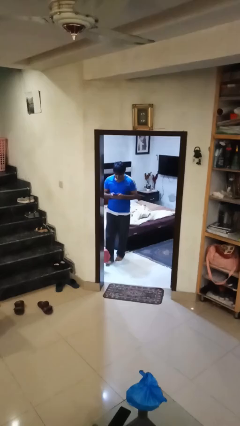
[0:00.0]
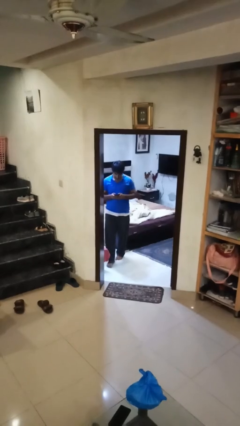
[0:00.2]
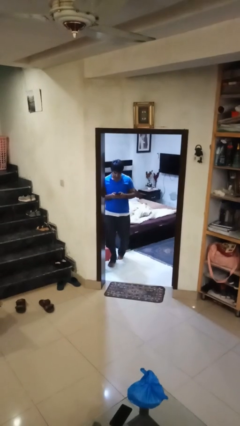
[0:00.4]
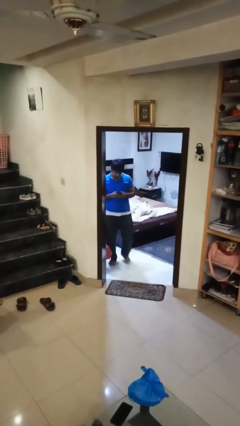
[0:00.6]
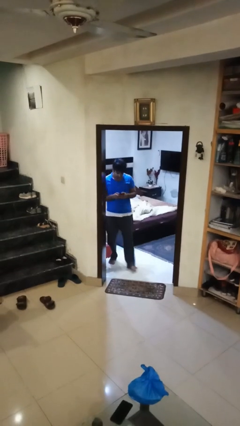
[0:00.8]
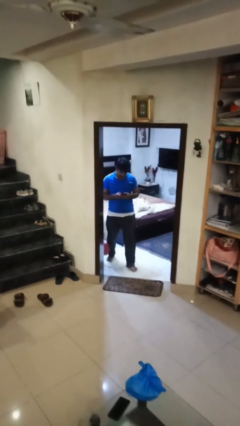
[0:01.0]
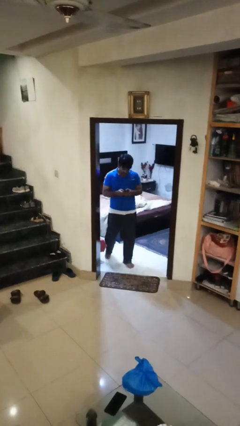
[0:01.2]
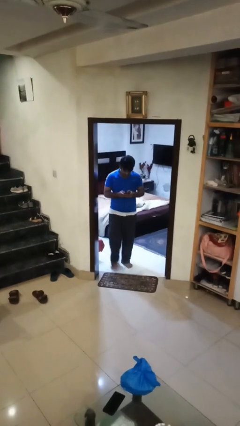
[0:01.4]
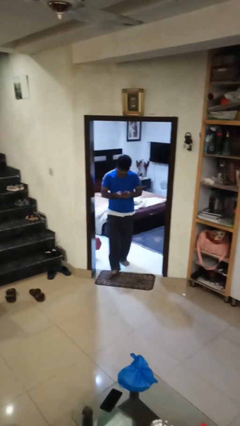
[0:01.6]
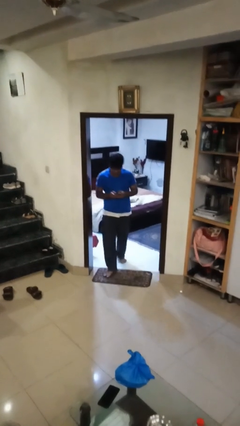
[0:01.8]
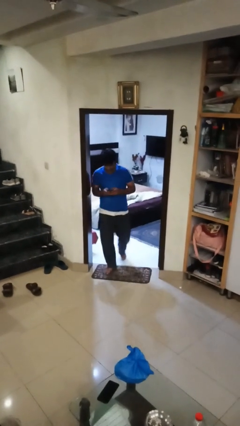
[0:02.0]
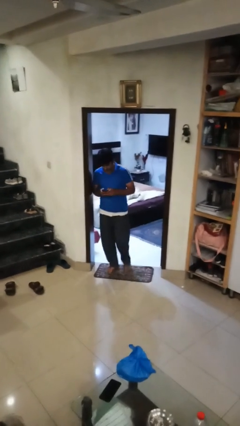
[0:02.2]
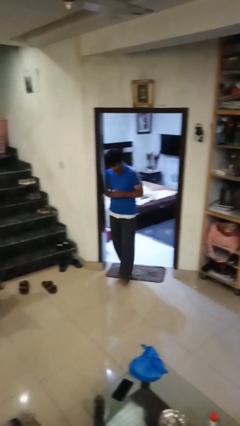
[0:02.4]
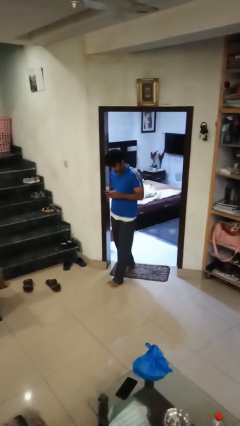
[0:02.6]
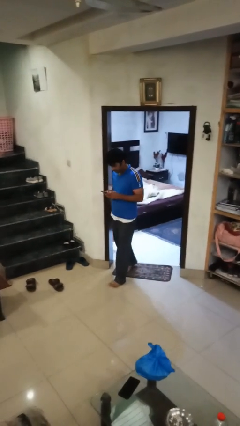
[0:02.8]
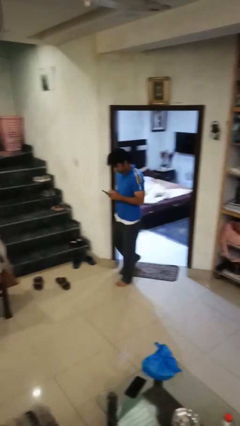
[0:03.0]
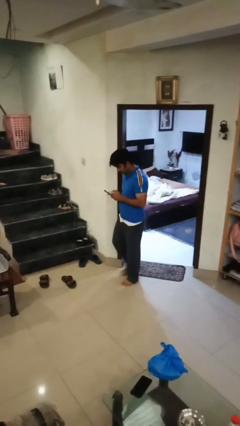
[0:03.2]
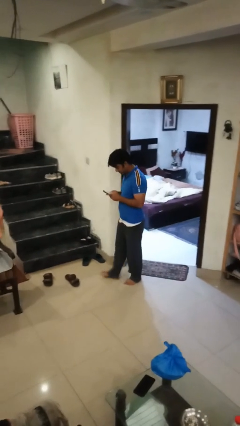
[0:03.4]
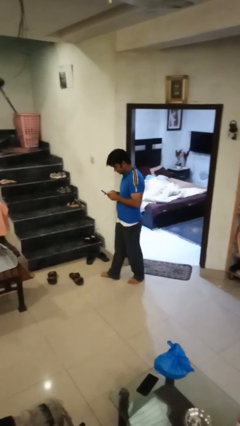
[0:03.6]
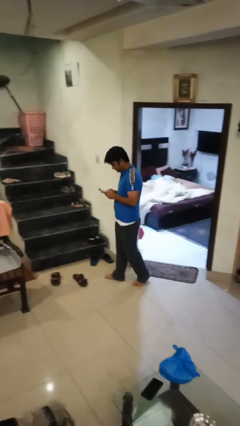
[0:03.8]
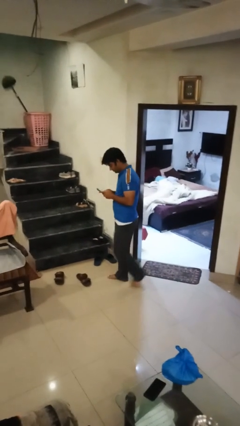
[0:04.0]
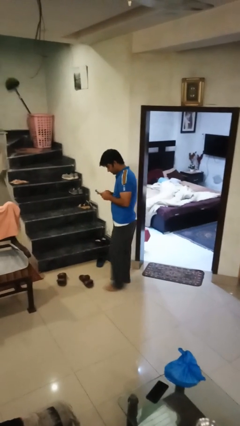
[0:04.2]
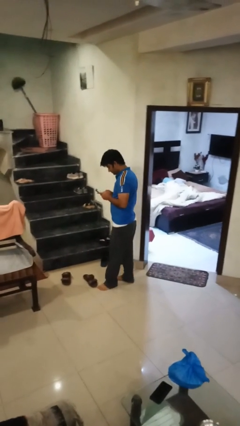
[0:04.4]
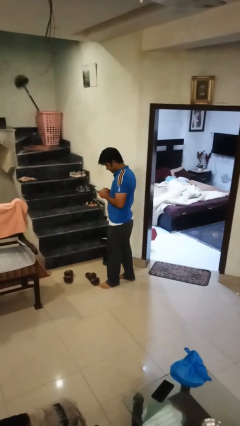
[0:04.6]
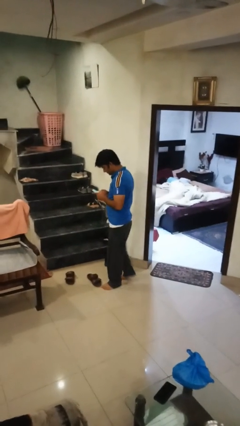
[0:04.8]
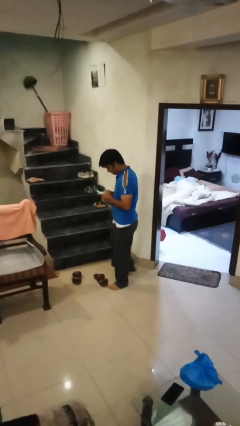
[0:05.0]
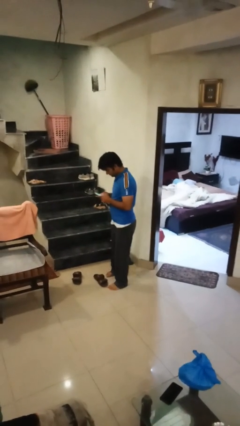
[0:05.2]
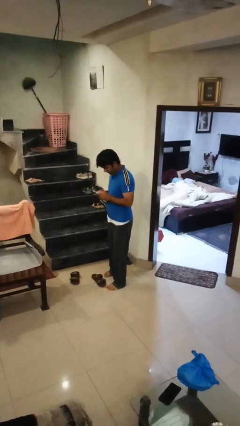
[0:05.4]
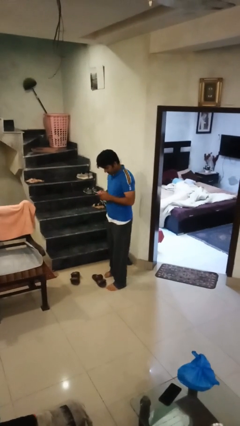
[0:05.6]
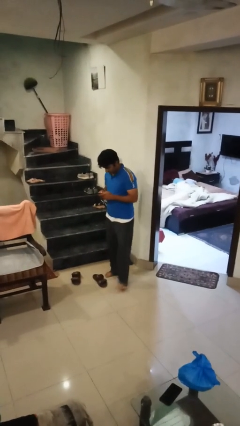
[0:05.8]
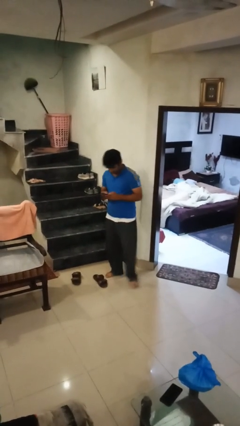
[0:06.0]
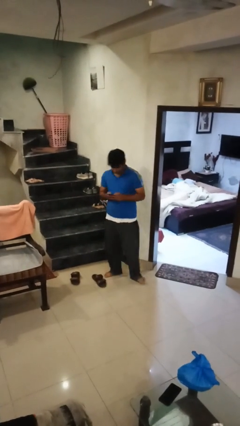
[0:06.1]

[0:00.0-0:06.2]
person enters scene through structure

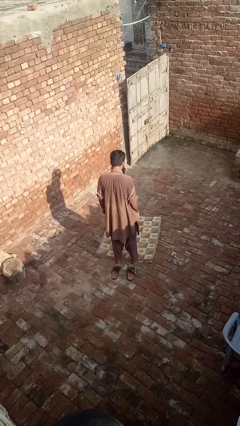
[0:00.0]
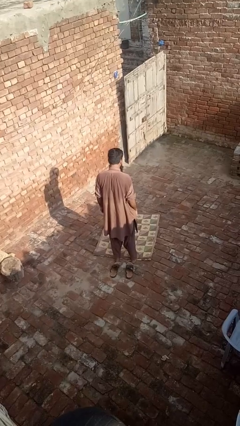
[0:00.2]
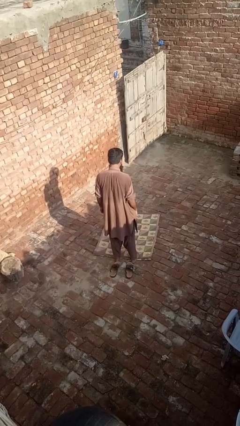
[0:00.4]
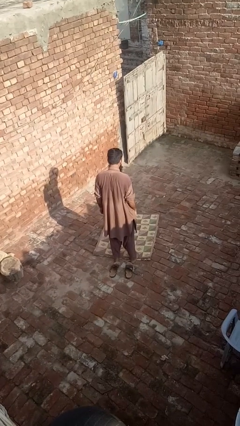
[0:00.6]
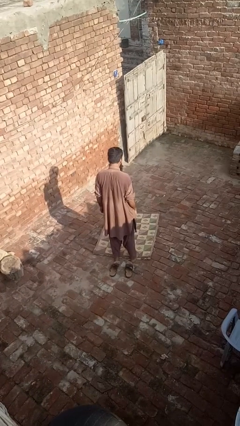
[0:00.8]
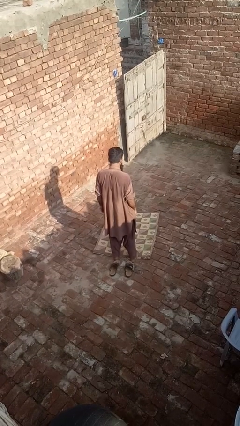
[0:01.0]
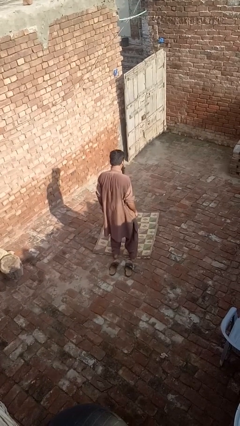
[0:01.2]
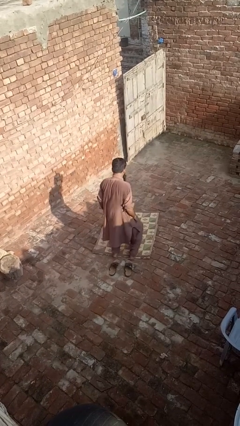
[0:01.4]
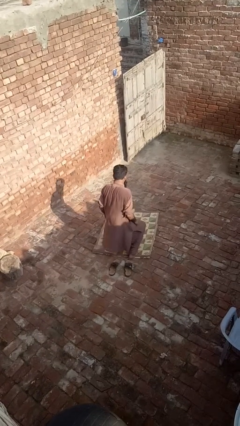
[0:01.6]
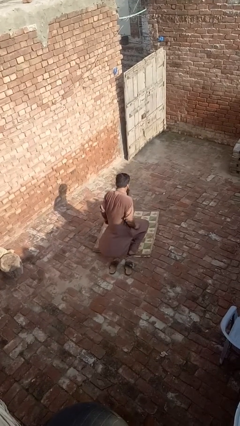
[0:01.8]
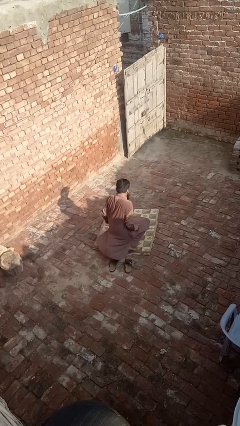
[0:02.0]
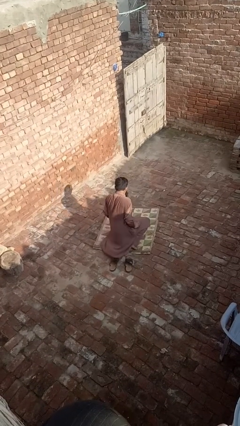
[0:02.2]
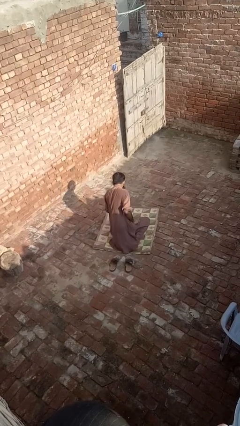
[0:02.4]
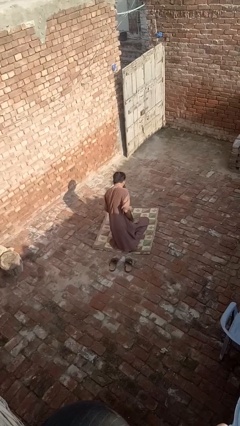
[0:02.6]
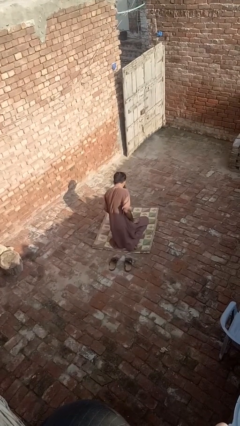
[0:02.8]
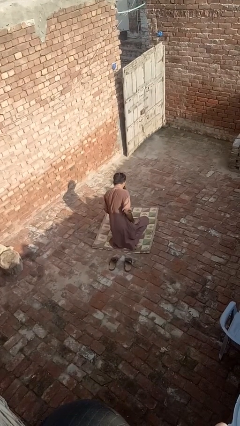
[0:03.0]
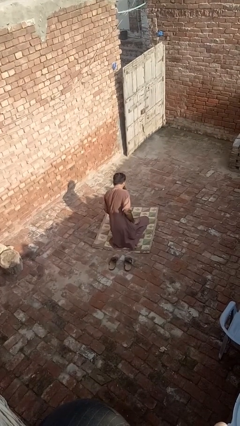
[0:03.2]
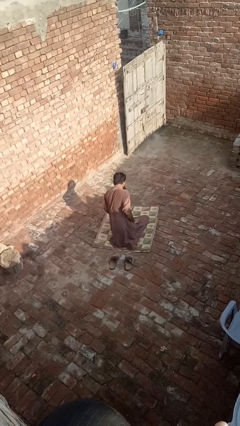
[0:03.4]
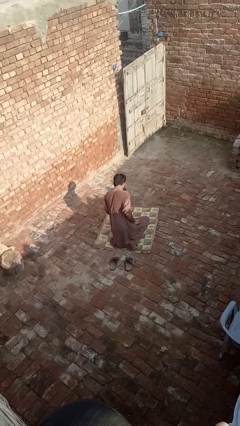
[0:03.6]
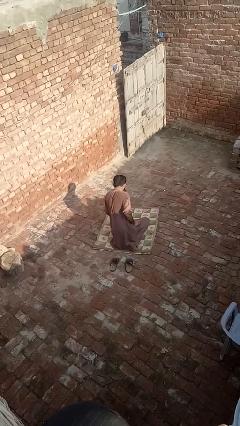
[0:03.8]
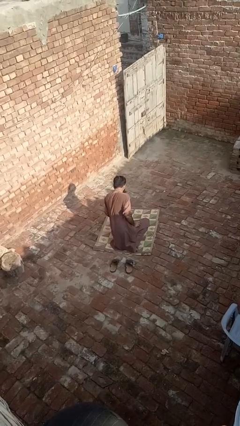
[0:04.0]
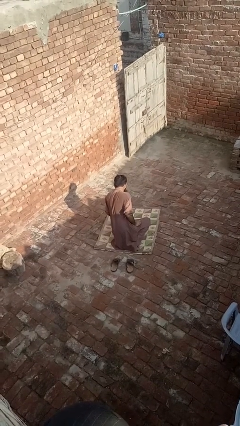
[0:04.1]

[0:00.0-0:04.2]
person kneels

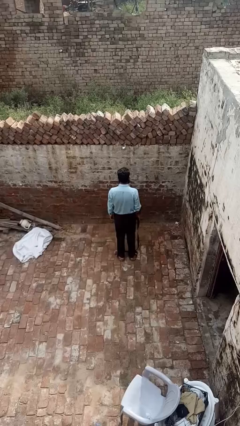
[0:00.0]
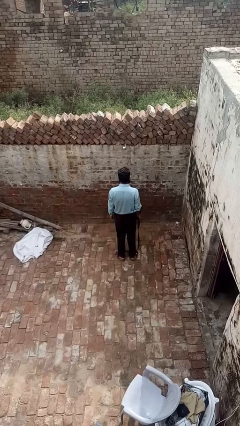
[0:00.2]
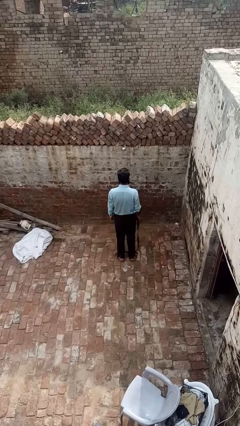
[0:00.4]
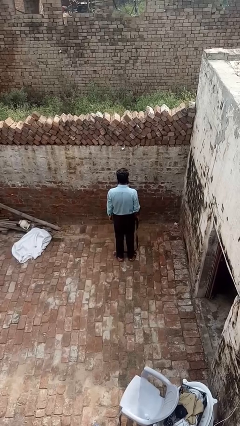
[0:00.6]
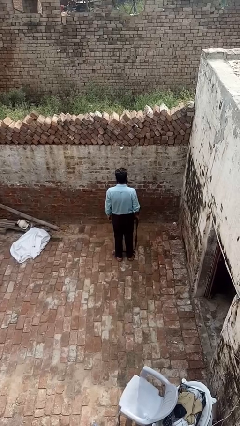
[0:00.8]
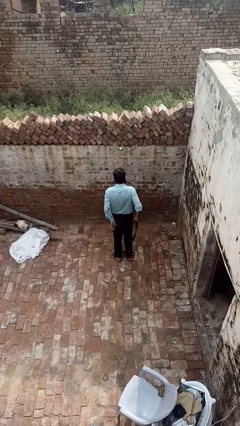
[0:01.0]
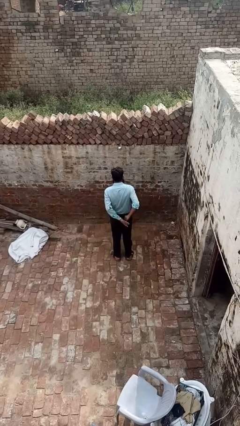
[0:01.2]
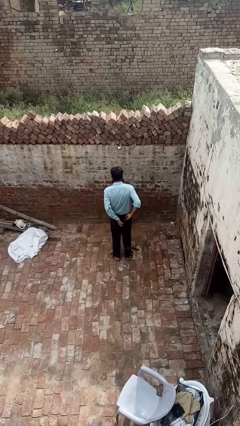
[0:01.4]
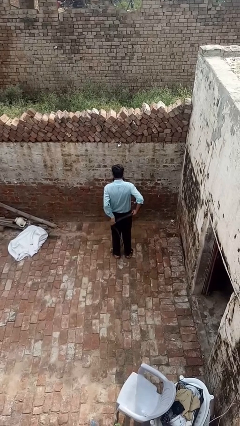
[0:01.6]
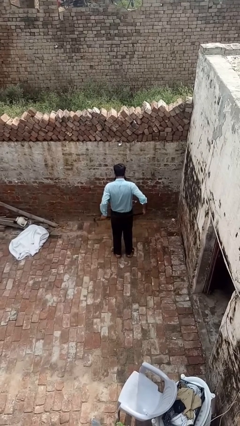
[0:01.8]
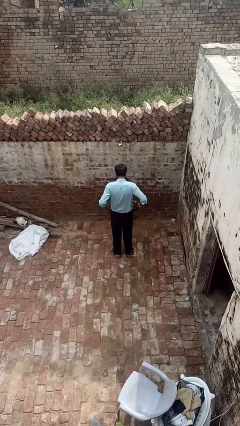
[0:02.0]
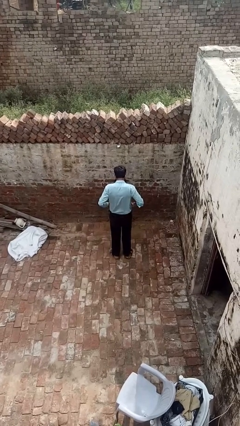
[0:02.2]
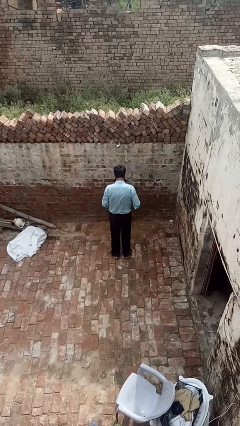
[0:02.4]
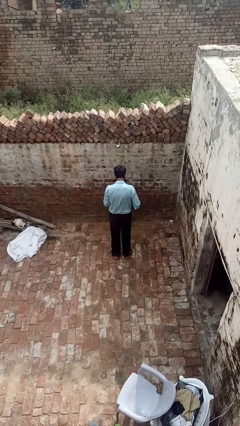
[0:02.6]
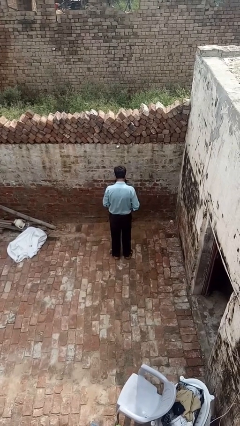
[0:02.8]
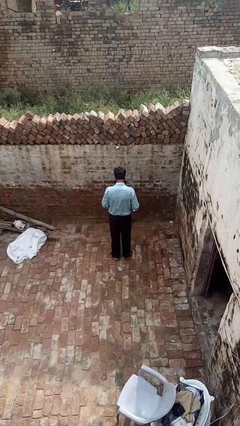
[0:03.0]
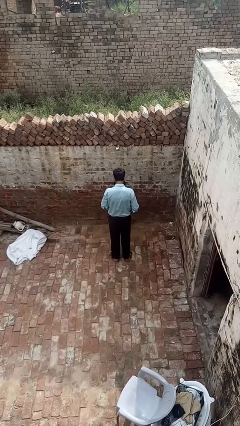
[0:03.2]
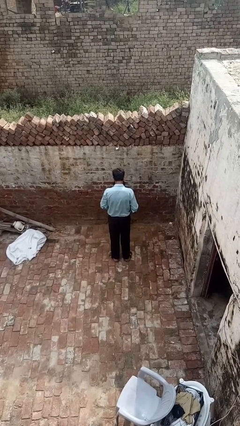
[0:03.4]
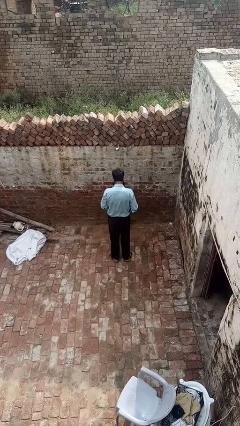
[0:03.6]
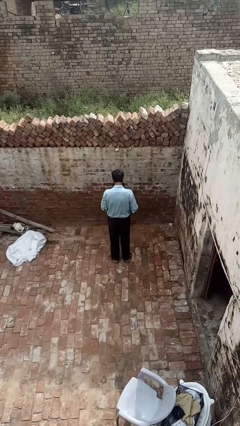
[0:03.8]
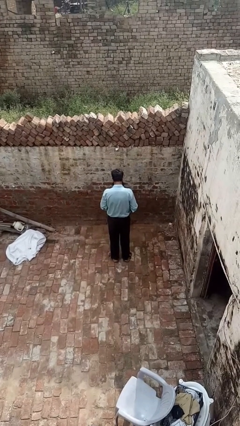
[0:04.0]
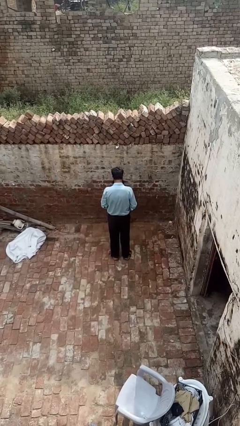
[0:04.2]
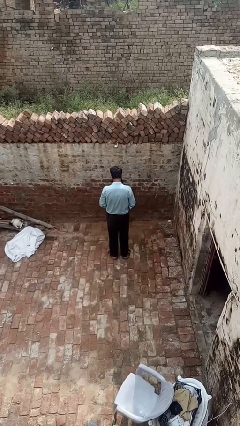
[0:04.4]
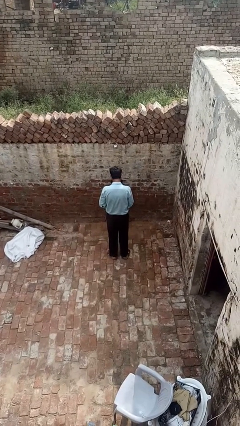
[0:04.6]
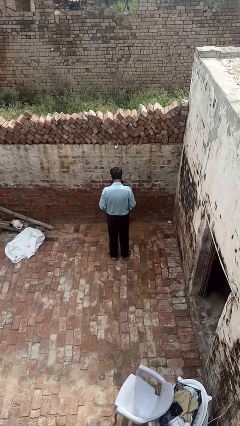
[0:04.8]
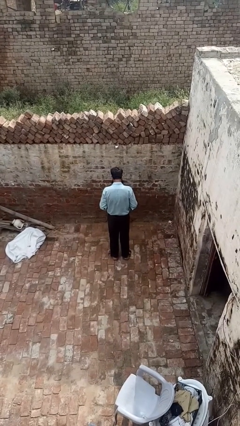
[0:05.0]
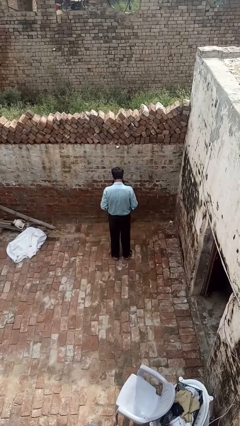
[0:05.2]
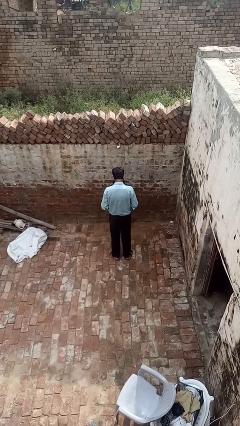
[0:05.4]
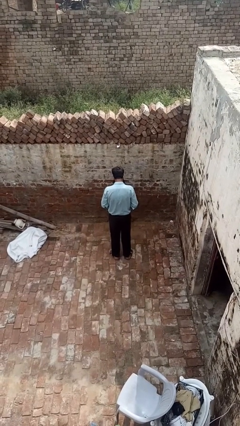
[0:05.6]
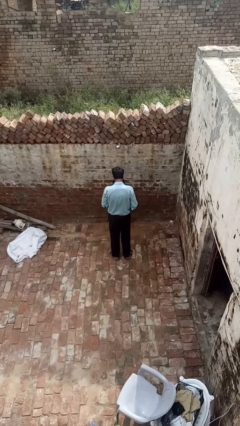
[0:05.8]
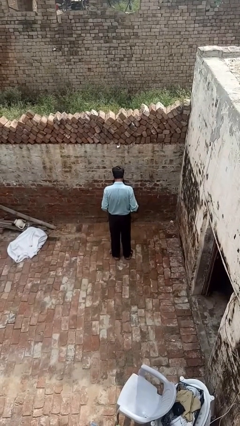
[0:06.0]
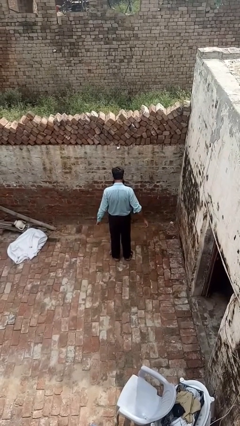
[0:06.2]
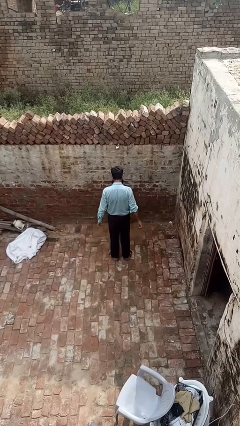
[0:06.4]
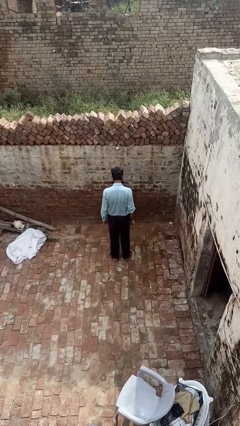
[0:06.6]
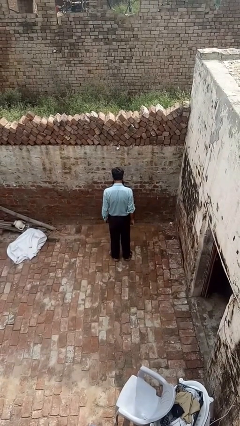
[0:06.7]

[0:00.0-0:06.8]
person puts on belt

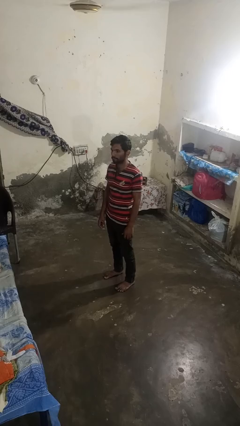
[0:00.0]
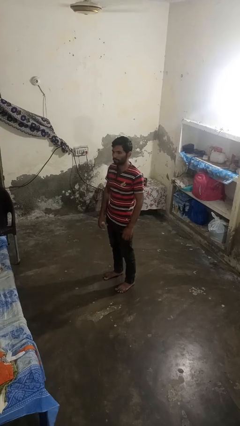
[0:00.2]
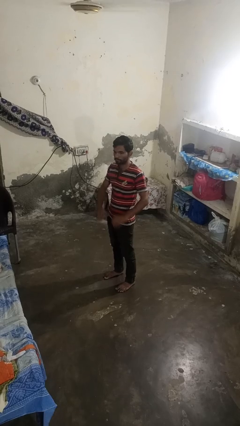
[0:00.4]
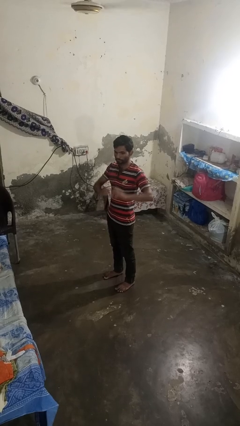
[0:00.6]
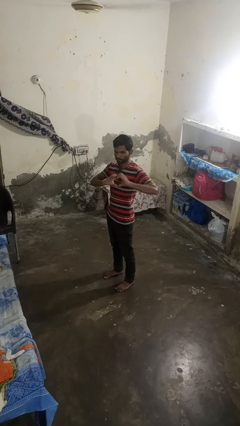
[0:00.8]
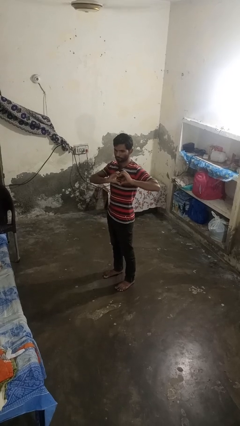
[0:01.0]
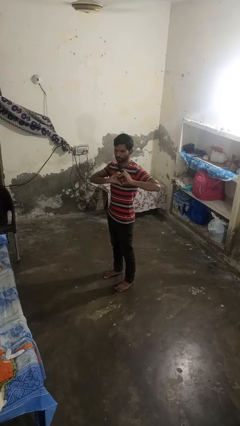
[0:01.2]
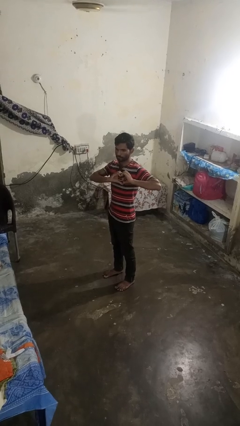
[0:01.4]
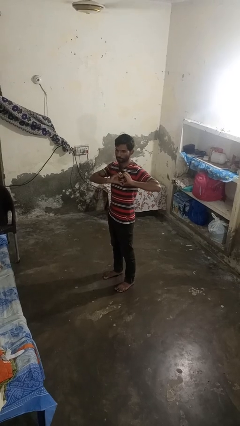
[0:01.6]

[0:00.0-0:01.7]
person gestures heart
